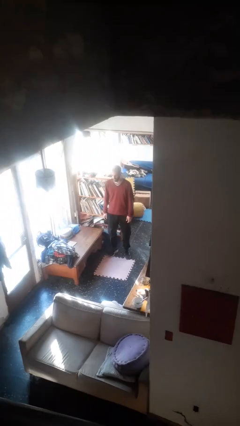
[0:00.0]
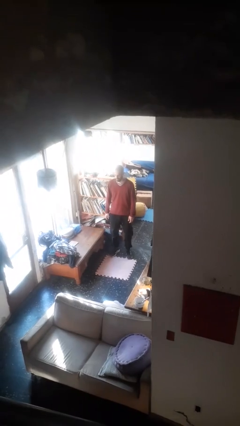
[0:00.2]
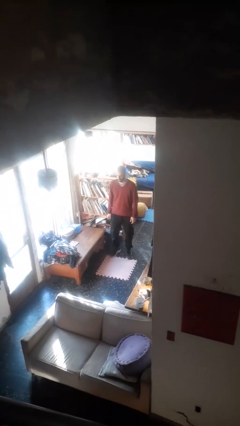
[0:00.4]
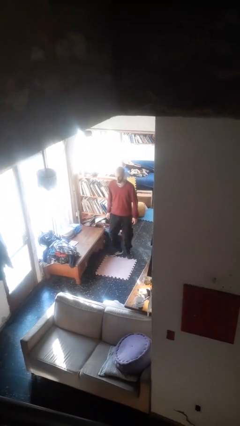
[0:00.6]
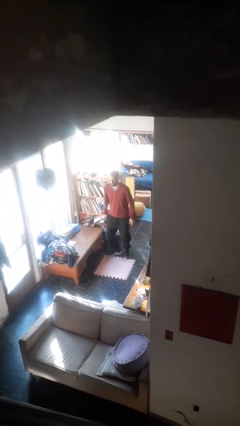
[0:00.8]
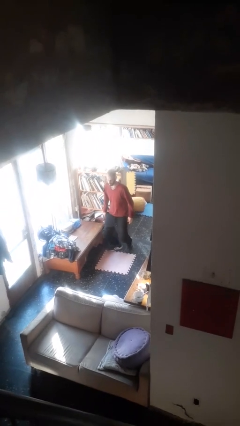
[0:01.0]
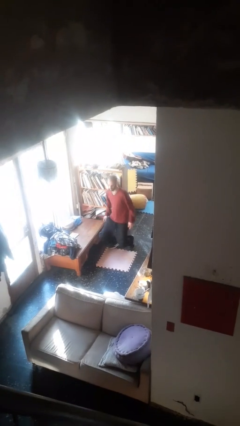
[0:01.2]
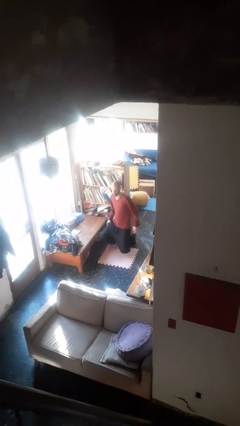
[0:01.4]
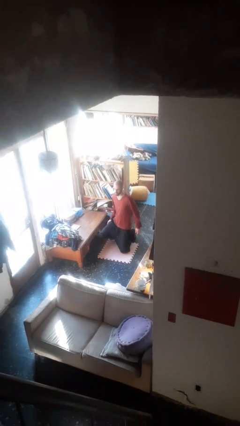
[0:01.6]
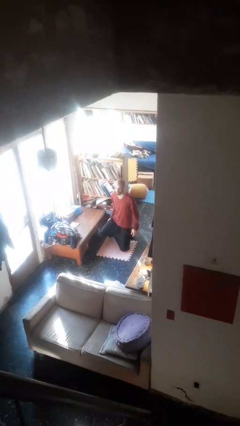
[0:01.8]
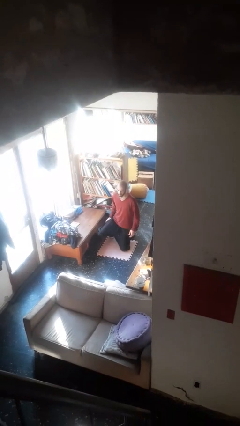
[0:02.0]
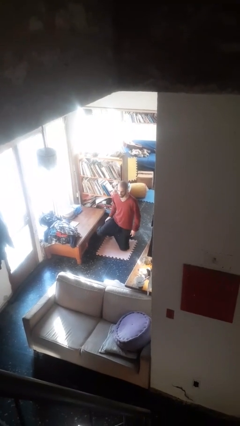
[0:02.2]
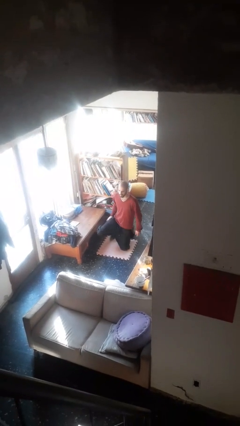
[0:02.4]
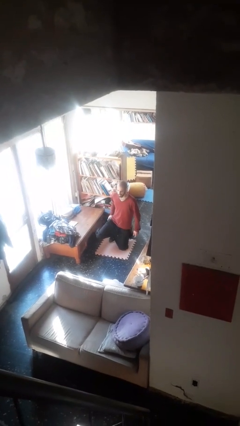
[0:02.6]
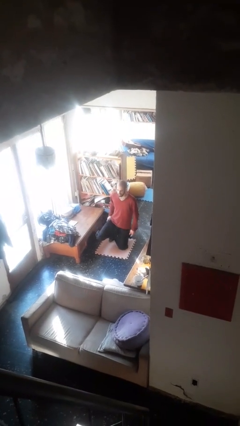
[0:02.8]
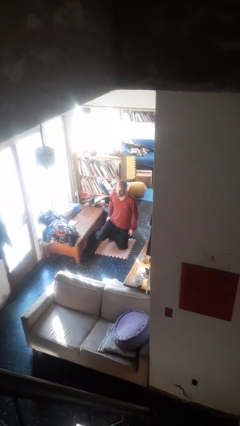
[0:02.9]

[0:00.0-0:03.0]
person kneels

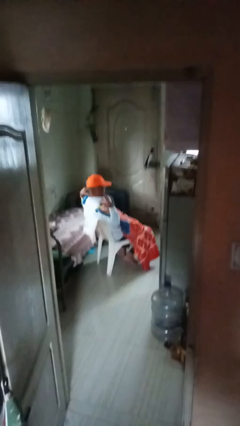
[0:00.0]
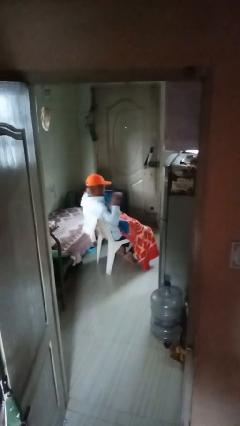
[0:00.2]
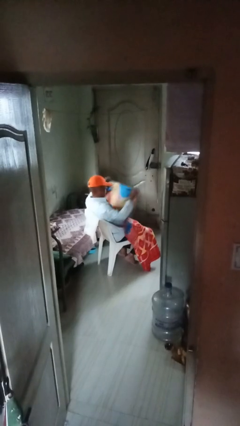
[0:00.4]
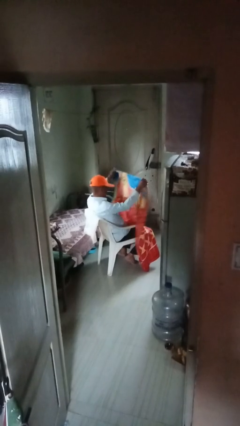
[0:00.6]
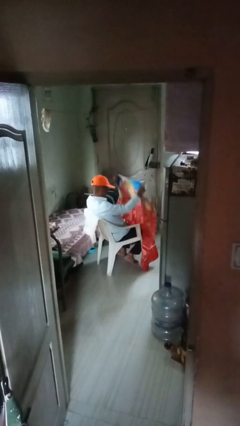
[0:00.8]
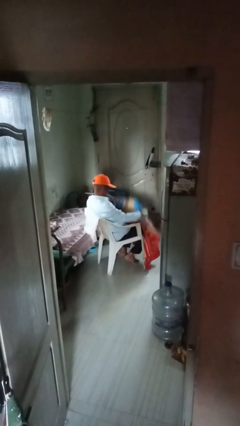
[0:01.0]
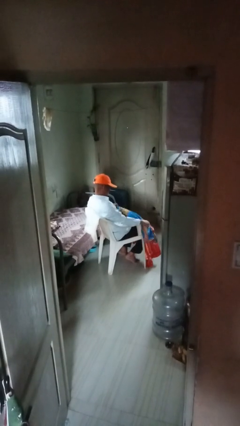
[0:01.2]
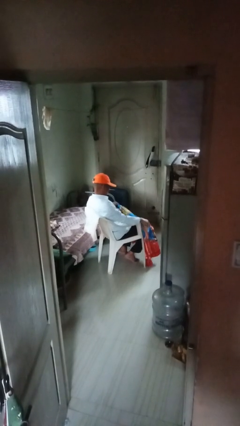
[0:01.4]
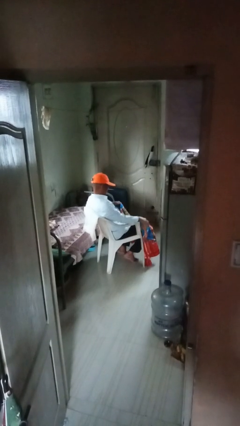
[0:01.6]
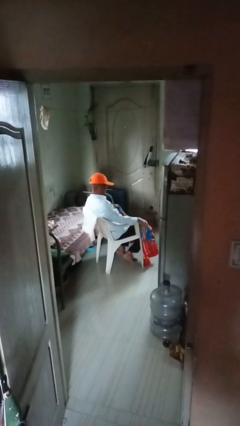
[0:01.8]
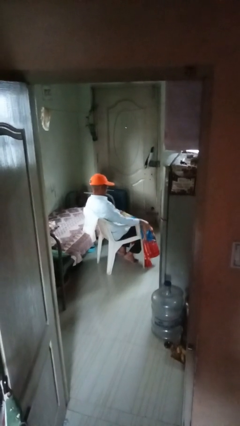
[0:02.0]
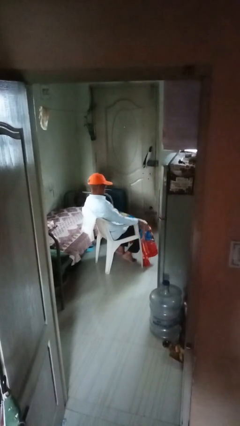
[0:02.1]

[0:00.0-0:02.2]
person uncovers with blanket

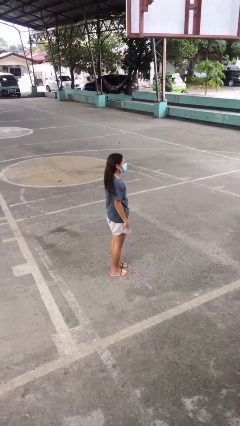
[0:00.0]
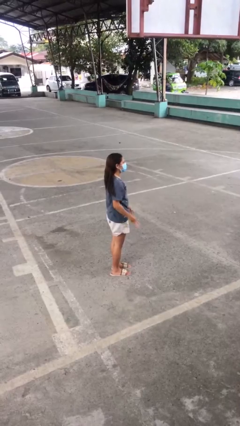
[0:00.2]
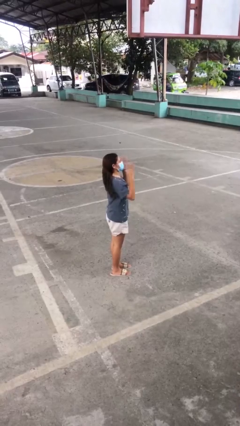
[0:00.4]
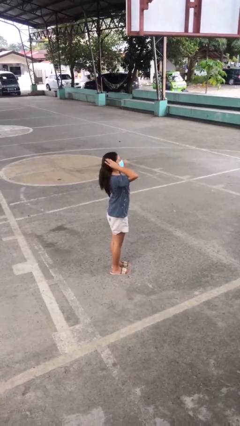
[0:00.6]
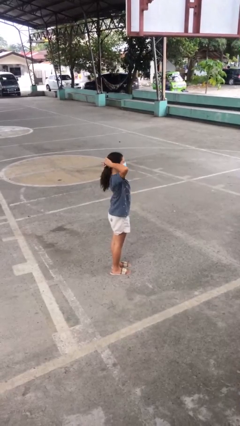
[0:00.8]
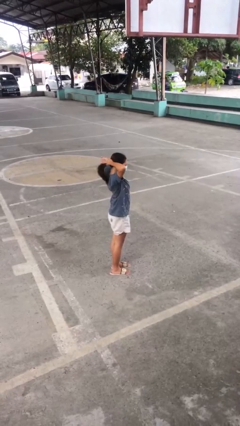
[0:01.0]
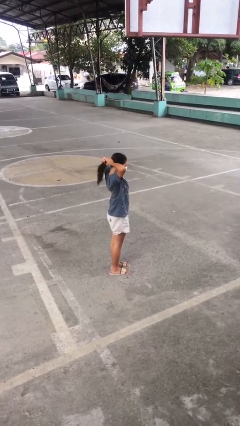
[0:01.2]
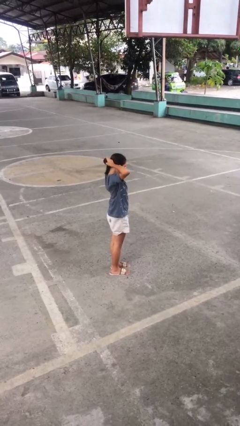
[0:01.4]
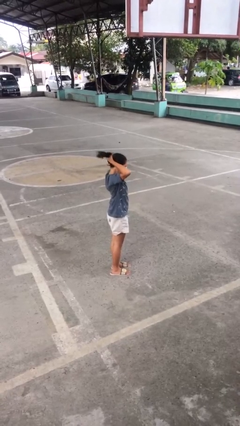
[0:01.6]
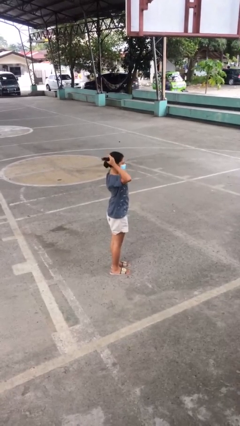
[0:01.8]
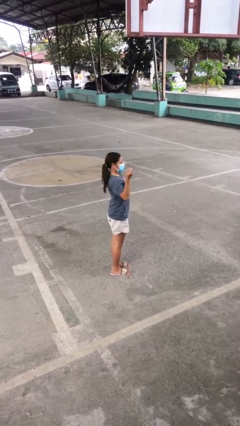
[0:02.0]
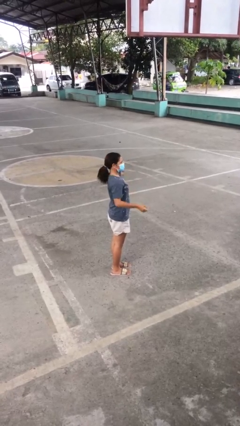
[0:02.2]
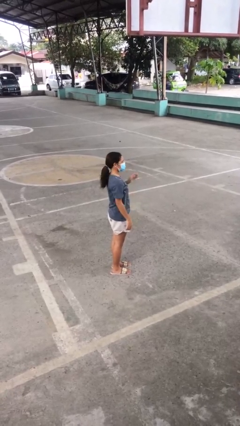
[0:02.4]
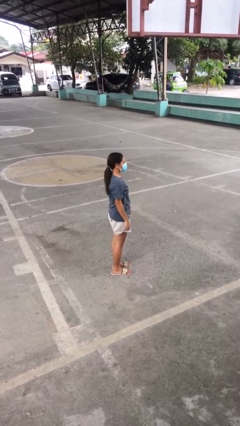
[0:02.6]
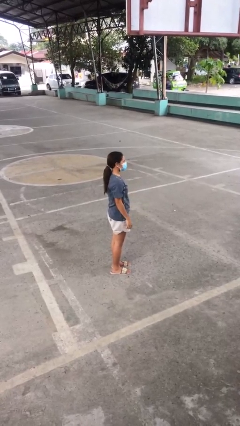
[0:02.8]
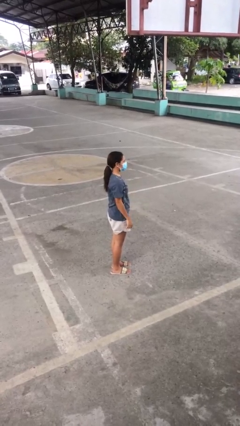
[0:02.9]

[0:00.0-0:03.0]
person puts hair in ponytail

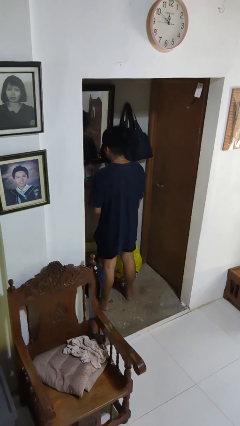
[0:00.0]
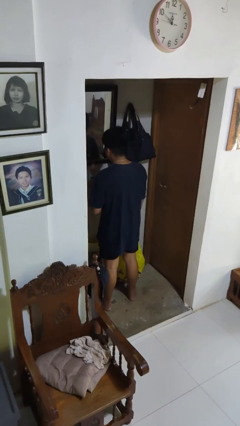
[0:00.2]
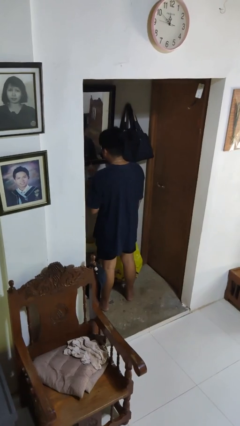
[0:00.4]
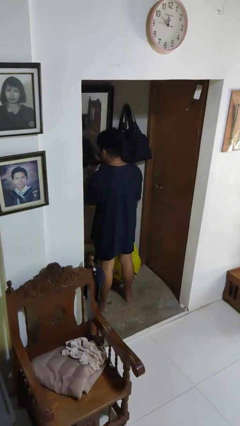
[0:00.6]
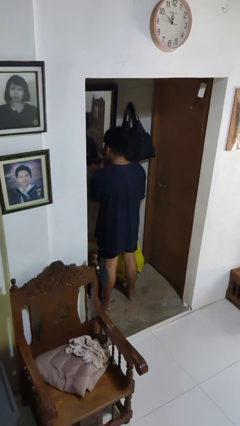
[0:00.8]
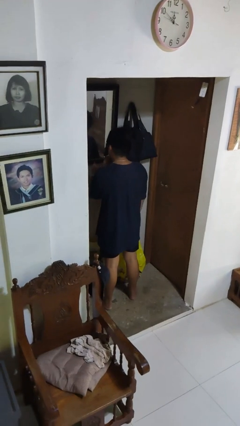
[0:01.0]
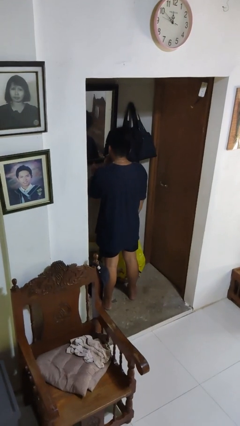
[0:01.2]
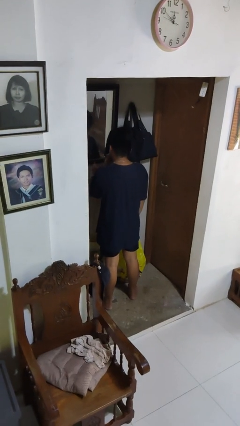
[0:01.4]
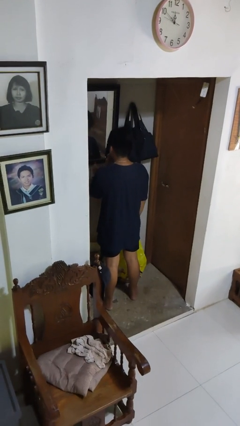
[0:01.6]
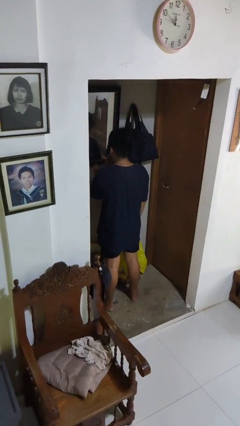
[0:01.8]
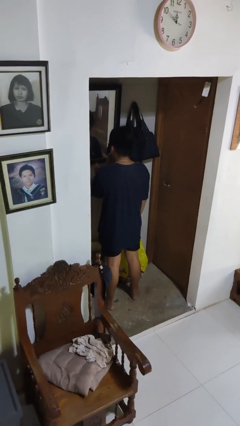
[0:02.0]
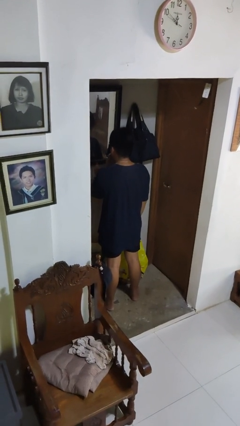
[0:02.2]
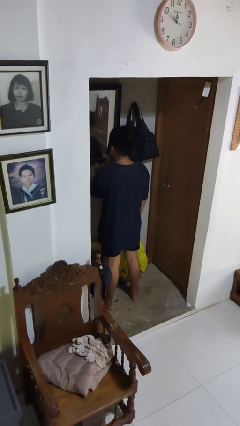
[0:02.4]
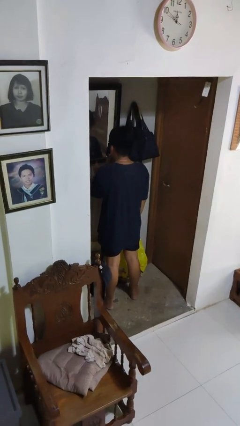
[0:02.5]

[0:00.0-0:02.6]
person applies lip makeup

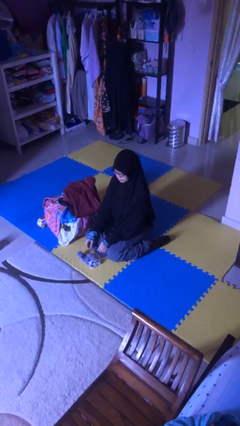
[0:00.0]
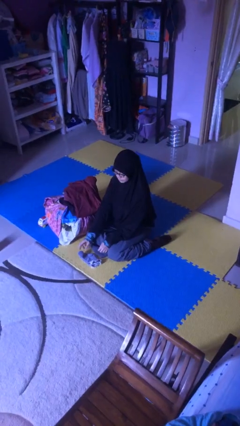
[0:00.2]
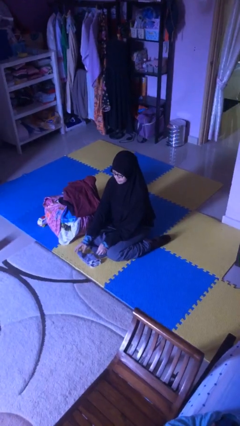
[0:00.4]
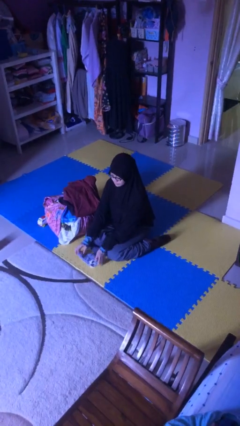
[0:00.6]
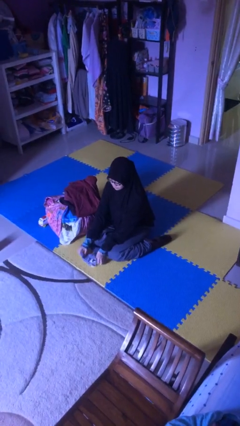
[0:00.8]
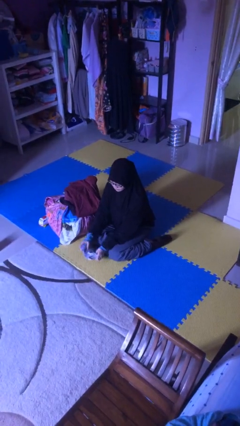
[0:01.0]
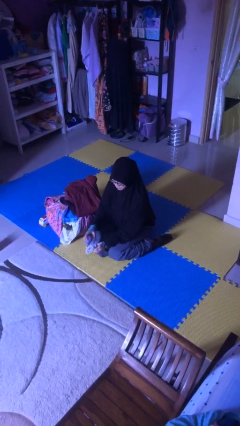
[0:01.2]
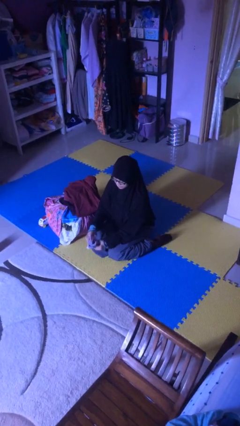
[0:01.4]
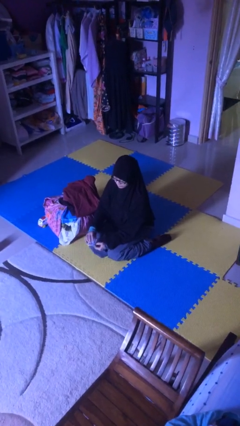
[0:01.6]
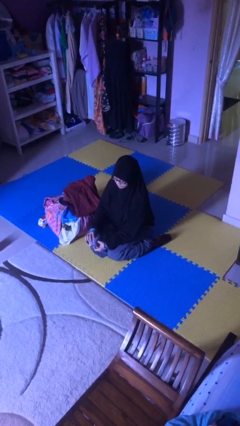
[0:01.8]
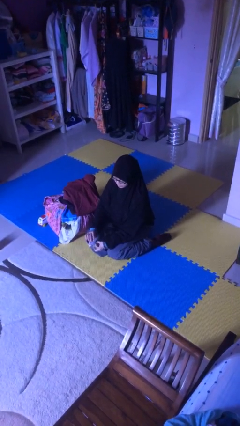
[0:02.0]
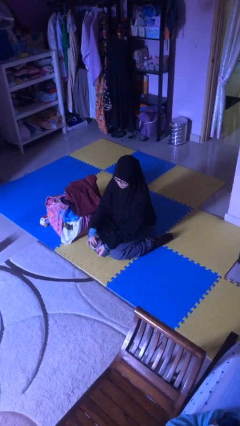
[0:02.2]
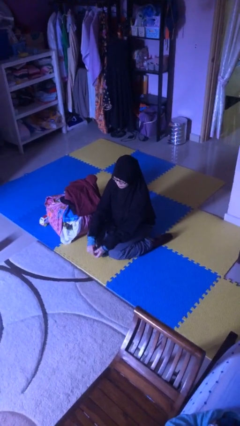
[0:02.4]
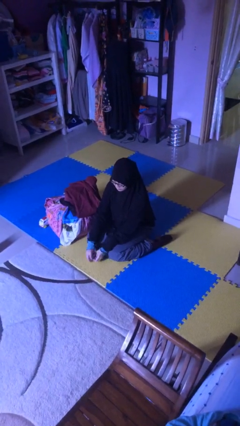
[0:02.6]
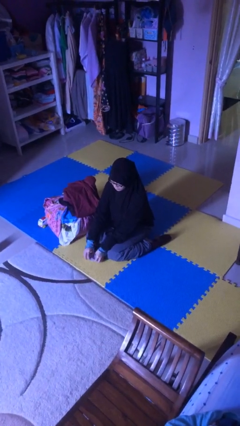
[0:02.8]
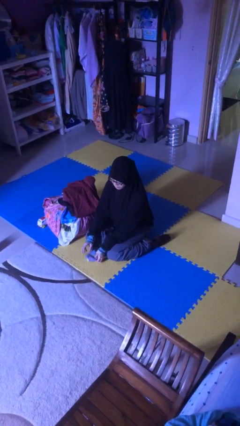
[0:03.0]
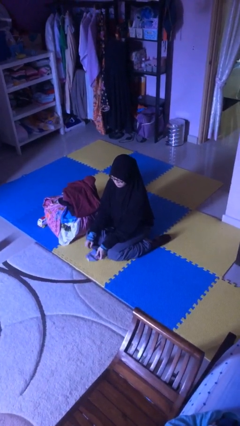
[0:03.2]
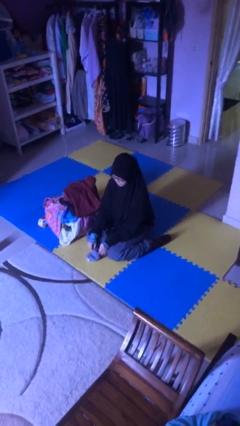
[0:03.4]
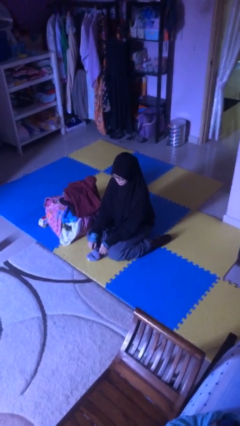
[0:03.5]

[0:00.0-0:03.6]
person folds socks

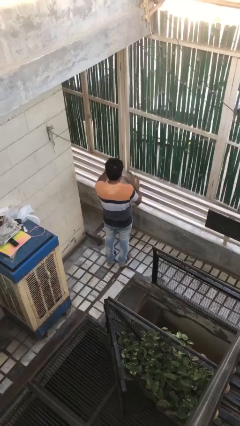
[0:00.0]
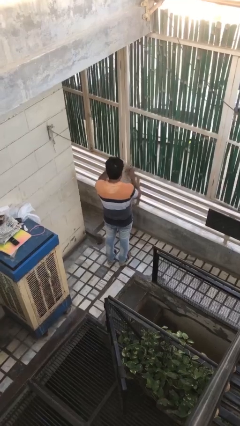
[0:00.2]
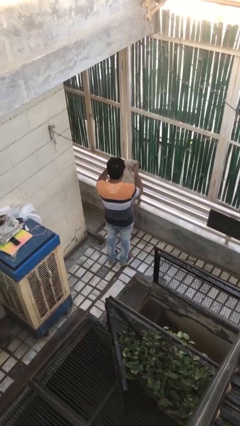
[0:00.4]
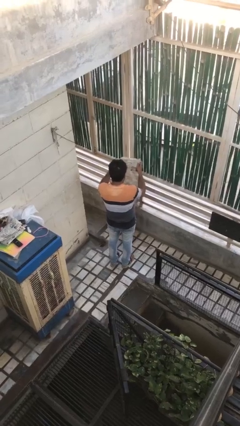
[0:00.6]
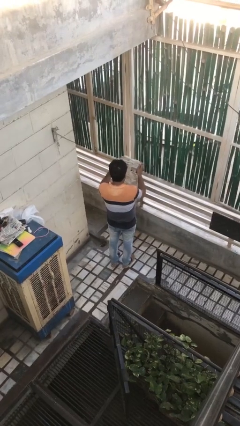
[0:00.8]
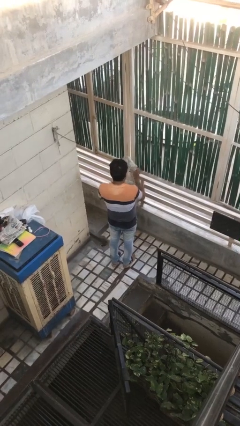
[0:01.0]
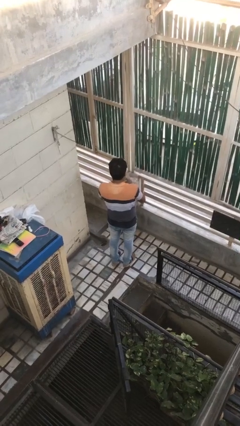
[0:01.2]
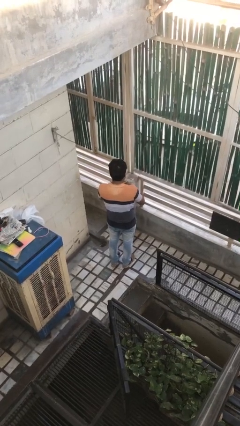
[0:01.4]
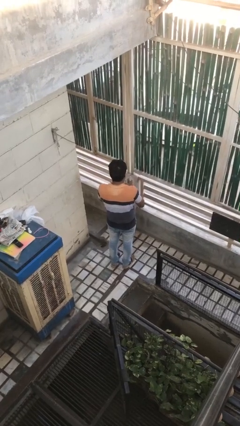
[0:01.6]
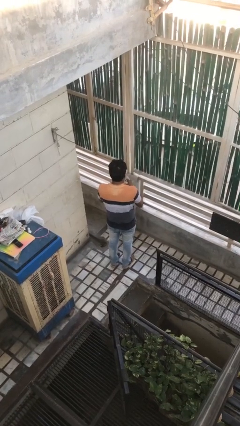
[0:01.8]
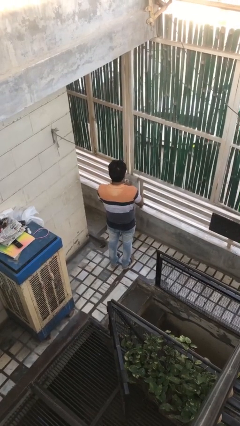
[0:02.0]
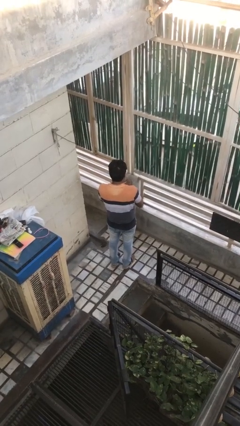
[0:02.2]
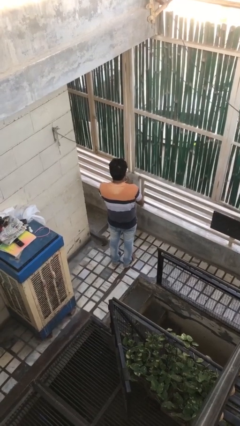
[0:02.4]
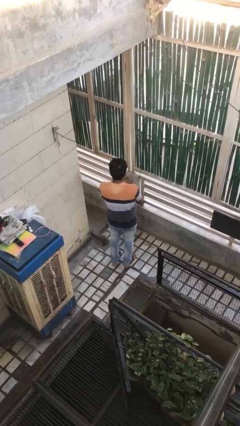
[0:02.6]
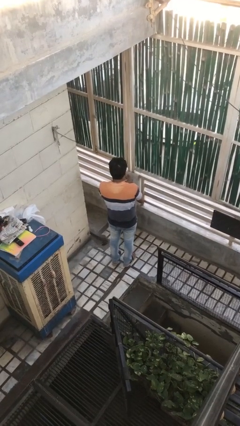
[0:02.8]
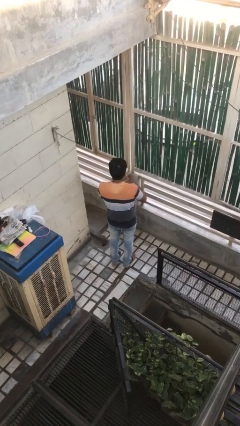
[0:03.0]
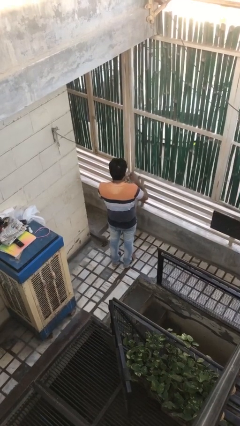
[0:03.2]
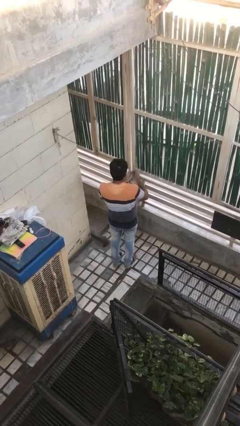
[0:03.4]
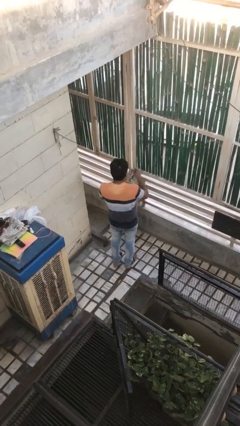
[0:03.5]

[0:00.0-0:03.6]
person crumples paper
